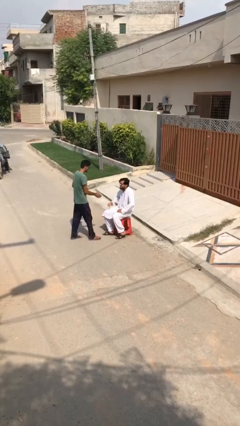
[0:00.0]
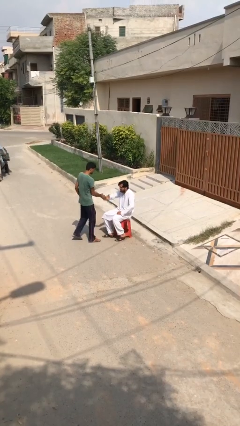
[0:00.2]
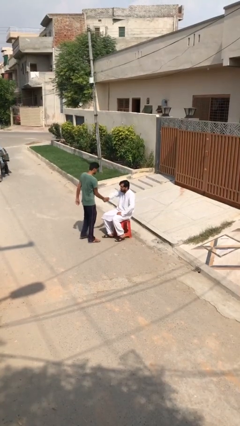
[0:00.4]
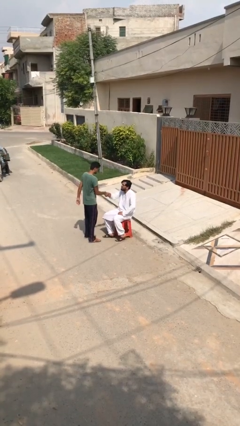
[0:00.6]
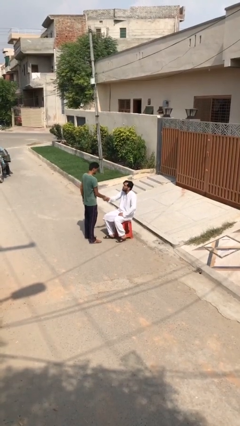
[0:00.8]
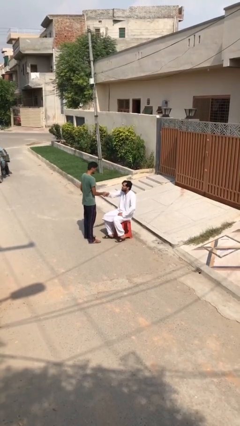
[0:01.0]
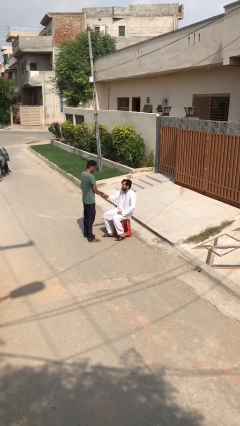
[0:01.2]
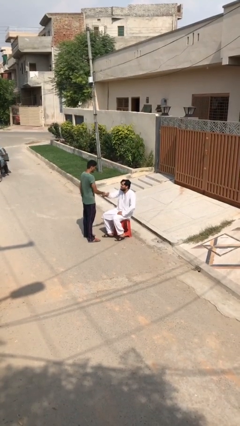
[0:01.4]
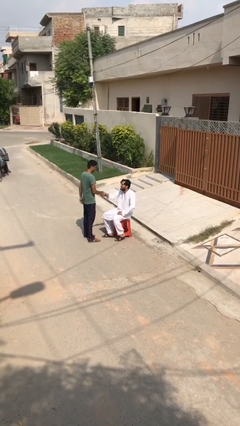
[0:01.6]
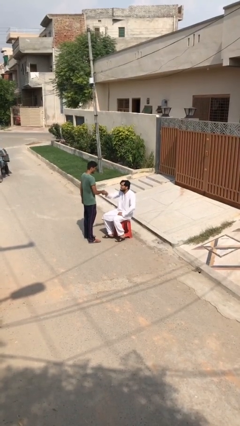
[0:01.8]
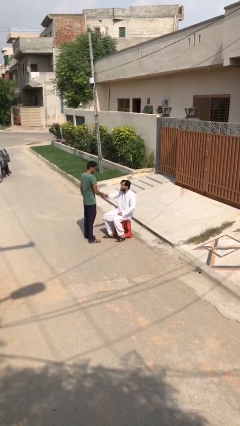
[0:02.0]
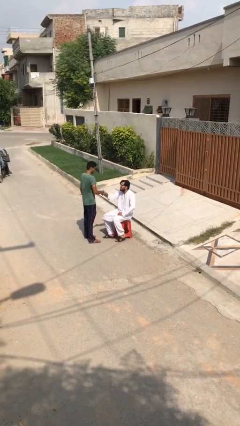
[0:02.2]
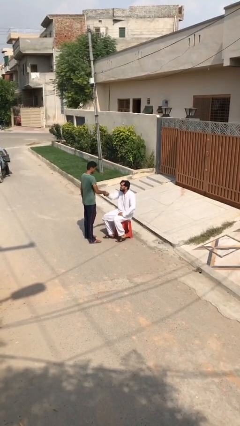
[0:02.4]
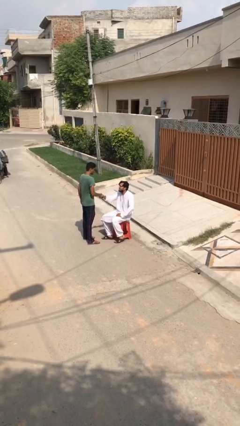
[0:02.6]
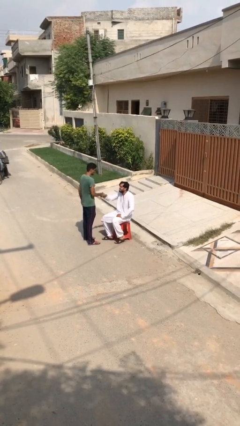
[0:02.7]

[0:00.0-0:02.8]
person shakes hand

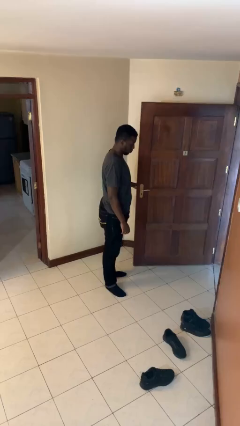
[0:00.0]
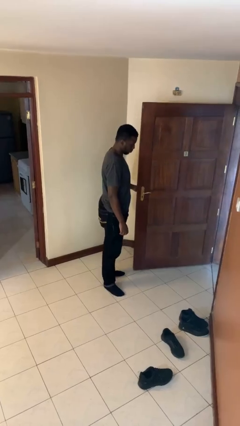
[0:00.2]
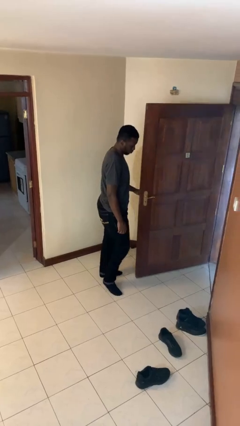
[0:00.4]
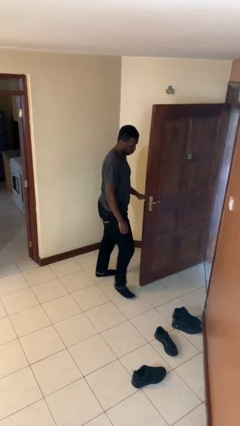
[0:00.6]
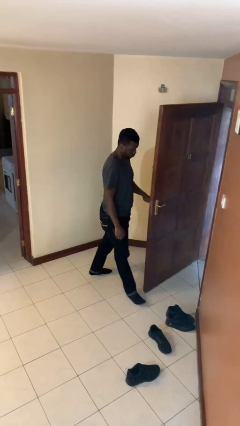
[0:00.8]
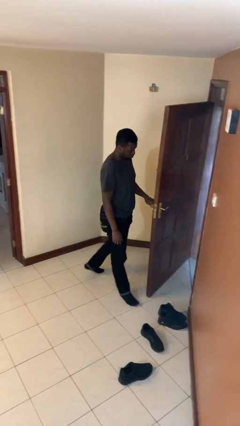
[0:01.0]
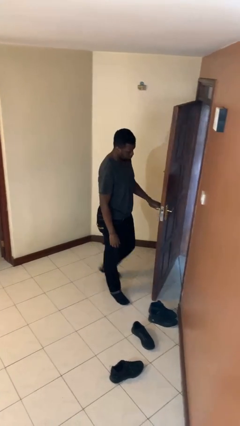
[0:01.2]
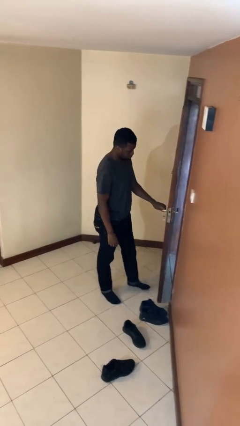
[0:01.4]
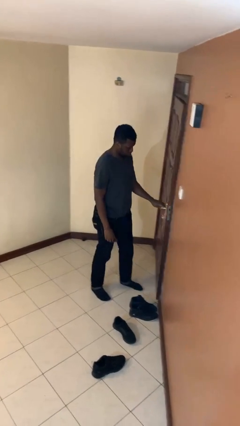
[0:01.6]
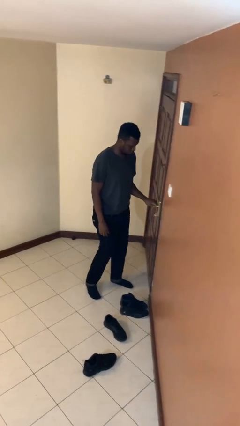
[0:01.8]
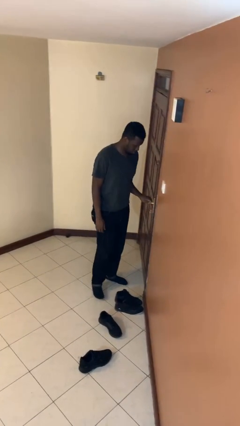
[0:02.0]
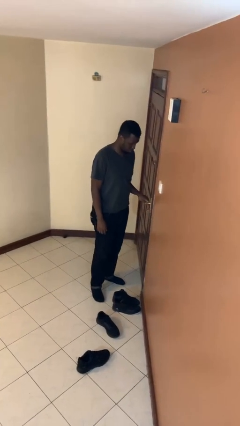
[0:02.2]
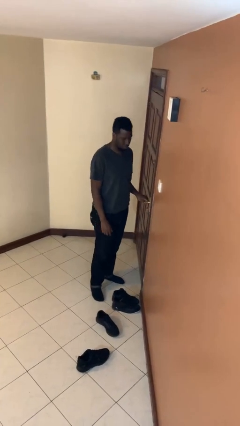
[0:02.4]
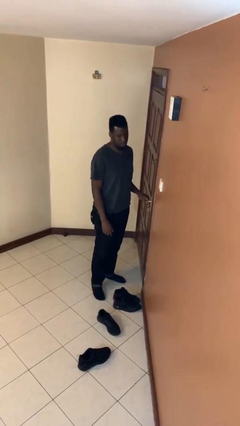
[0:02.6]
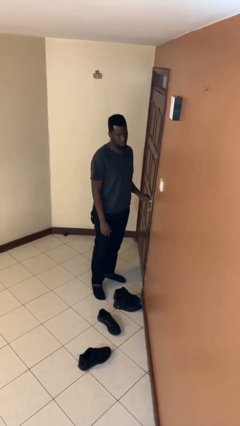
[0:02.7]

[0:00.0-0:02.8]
person closes facility door

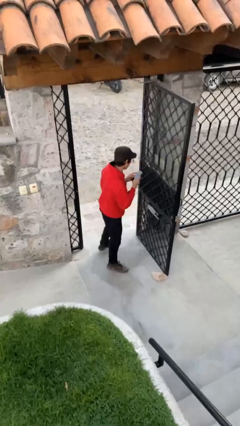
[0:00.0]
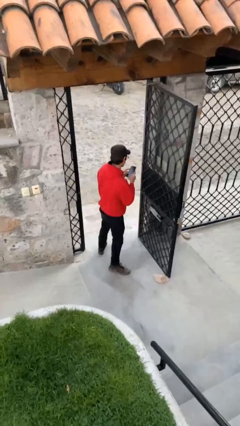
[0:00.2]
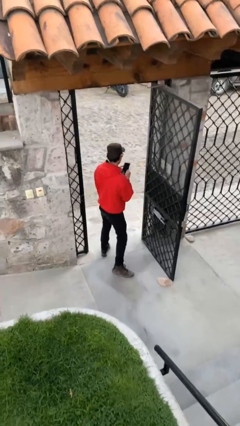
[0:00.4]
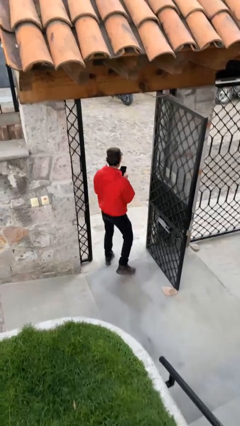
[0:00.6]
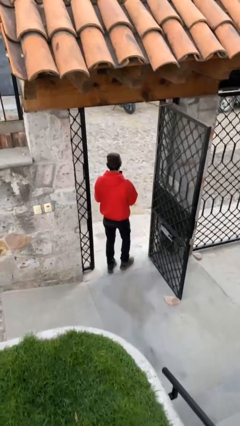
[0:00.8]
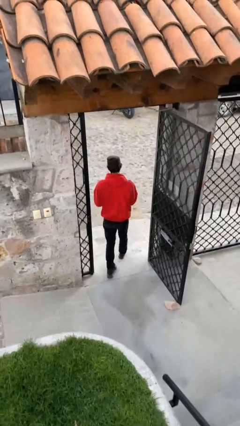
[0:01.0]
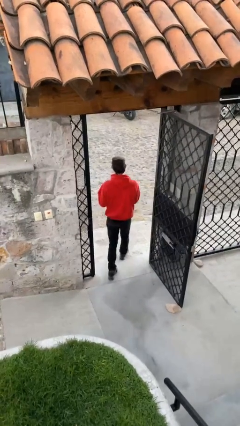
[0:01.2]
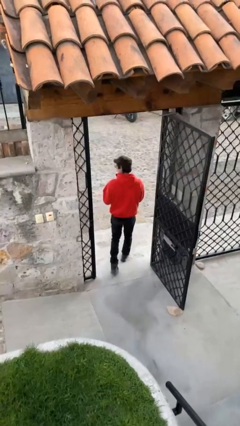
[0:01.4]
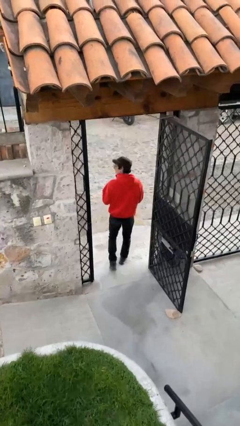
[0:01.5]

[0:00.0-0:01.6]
person exits scene through structure

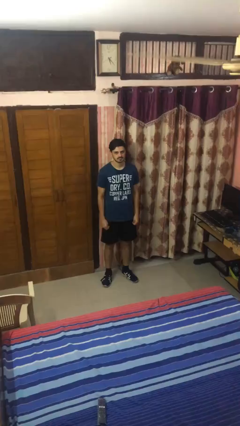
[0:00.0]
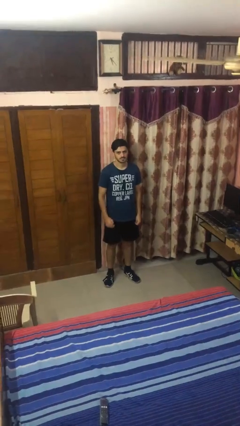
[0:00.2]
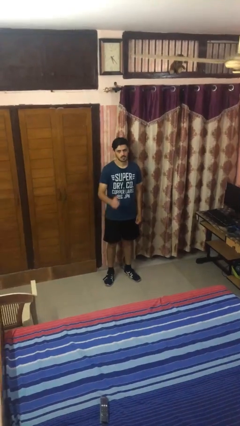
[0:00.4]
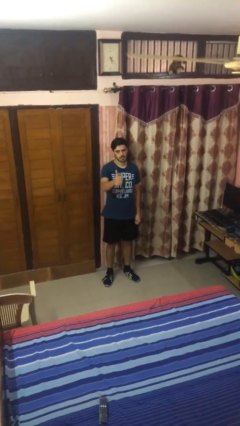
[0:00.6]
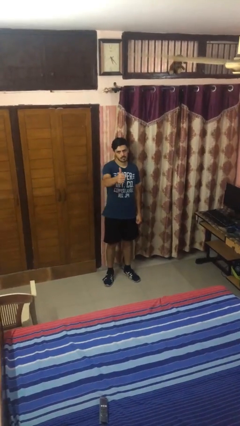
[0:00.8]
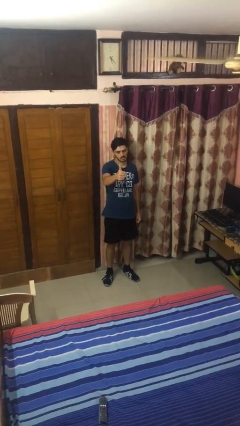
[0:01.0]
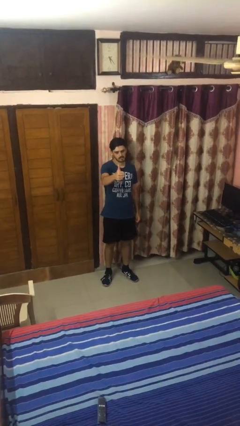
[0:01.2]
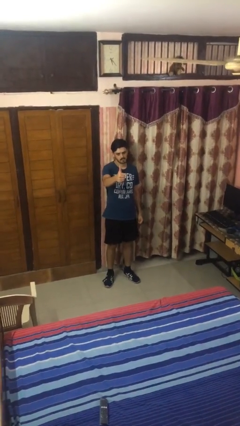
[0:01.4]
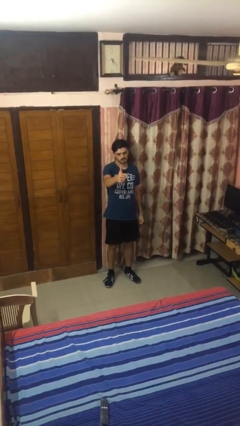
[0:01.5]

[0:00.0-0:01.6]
person gestures thumbs up

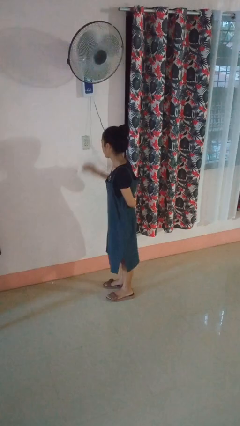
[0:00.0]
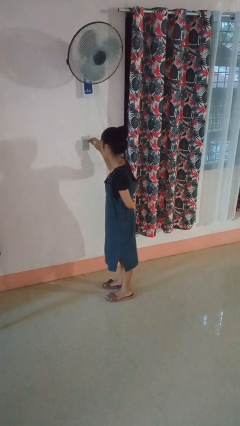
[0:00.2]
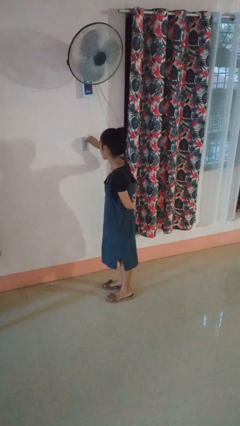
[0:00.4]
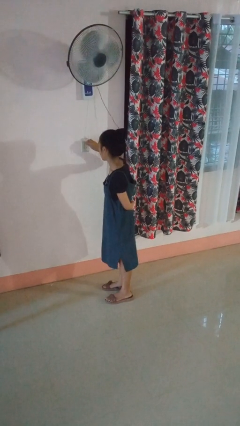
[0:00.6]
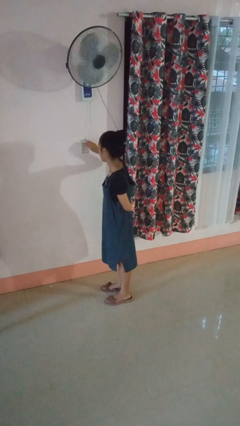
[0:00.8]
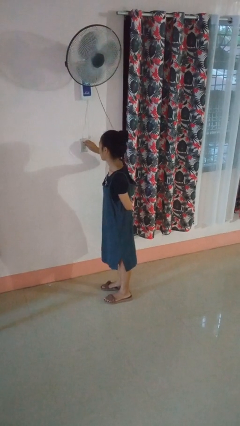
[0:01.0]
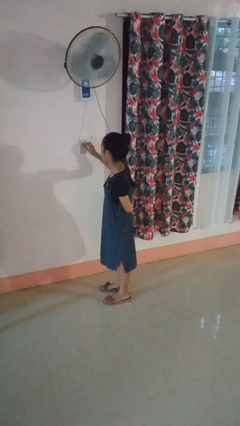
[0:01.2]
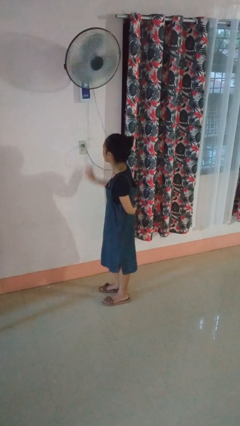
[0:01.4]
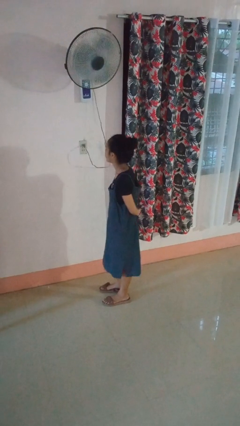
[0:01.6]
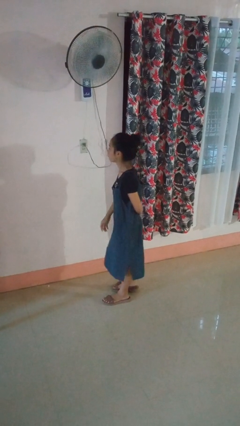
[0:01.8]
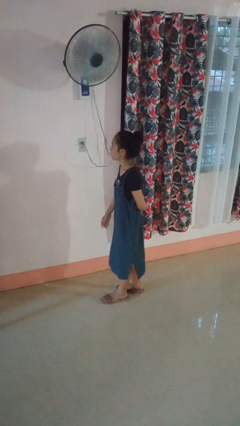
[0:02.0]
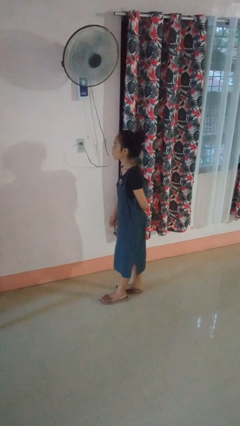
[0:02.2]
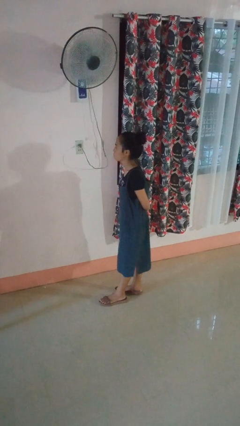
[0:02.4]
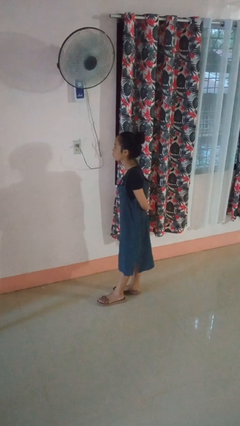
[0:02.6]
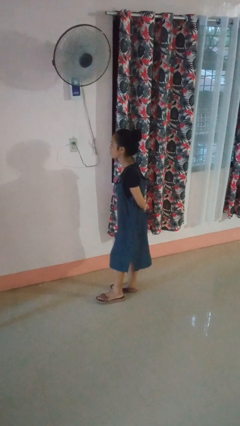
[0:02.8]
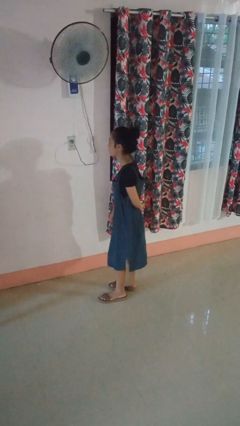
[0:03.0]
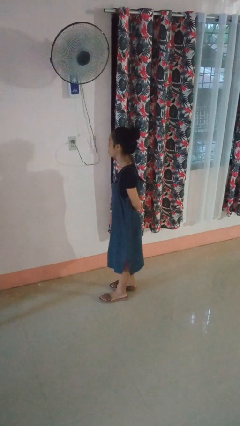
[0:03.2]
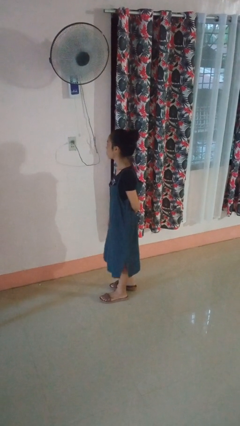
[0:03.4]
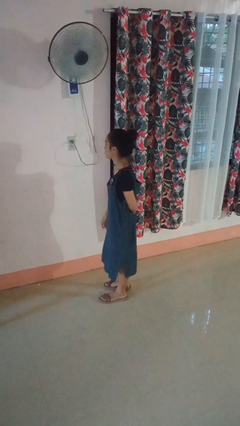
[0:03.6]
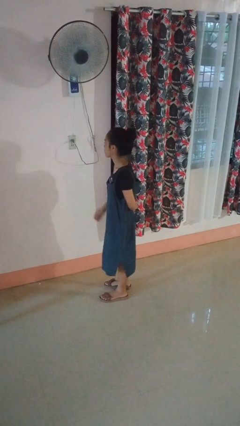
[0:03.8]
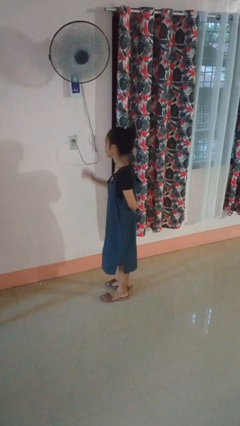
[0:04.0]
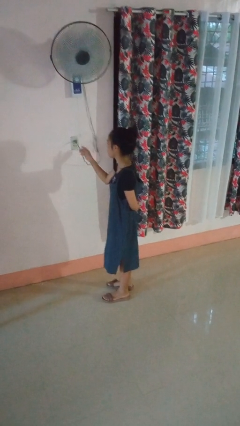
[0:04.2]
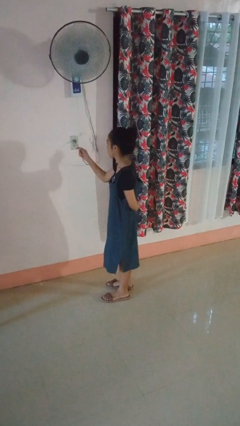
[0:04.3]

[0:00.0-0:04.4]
person plugs into electrical socket

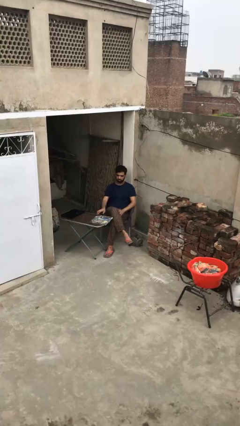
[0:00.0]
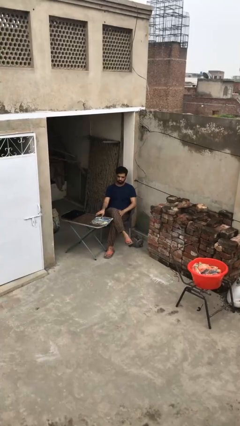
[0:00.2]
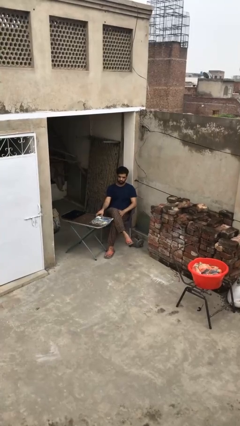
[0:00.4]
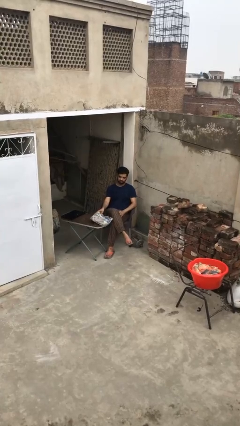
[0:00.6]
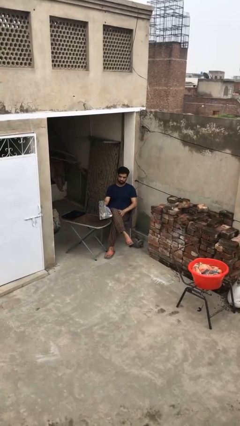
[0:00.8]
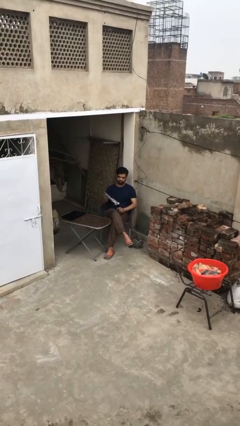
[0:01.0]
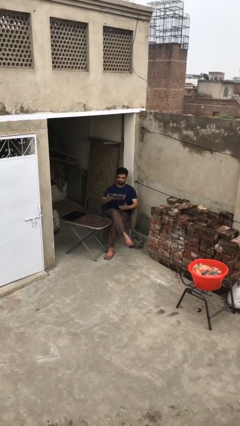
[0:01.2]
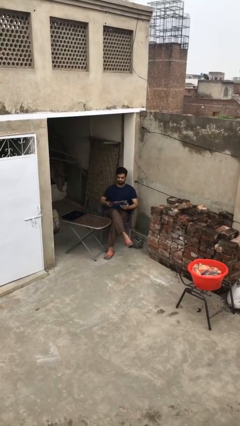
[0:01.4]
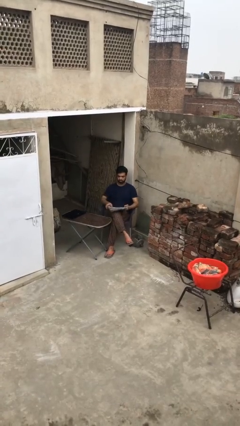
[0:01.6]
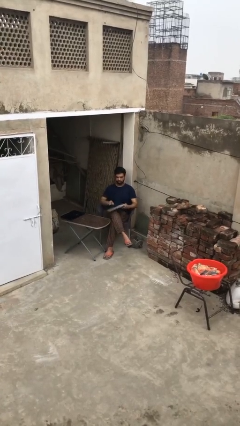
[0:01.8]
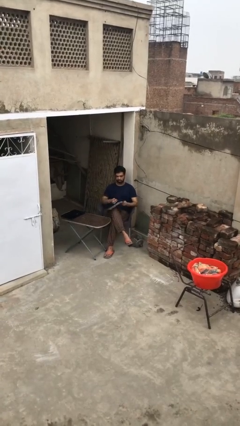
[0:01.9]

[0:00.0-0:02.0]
person picks up object from table

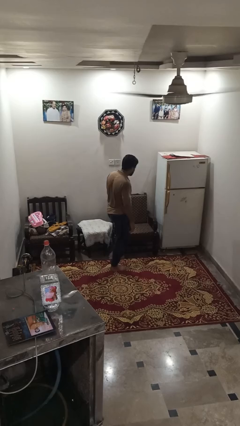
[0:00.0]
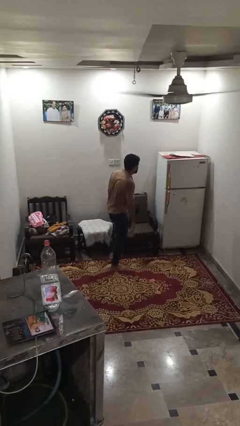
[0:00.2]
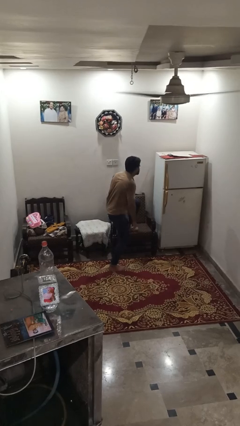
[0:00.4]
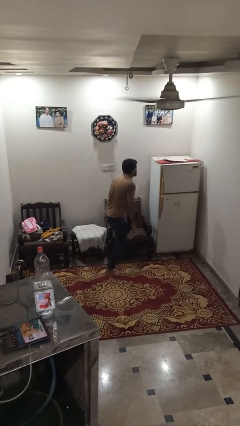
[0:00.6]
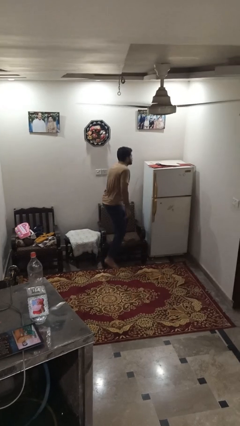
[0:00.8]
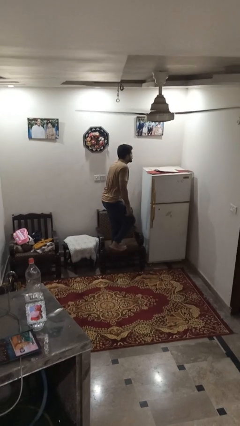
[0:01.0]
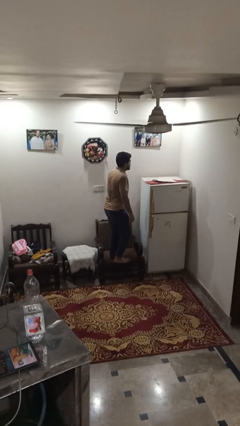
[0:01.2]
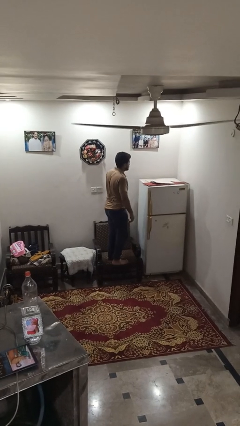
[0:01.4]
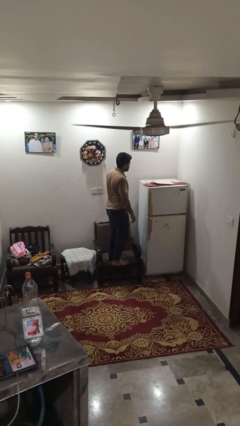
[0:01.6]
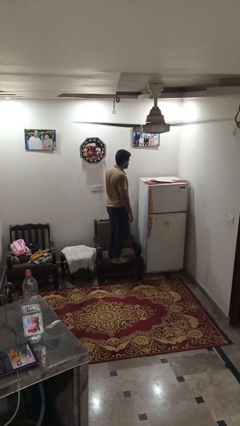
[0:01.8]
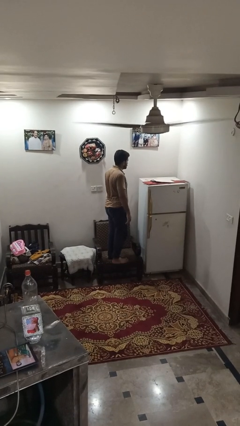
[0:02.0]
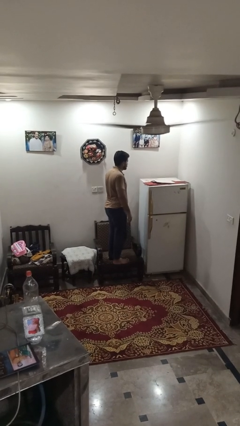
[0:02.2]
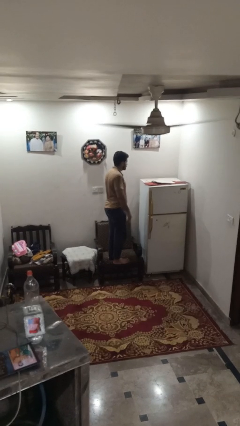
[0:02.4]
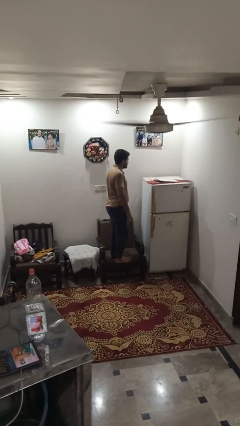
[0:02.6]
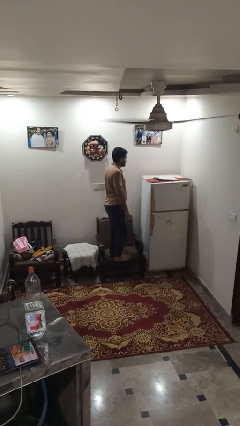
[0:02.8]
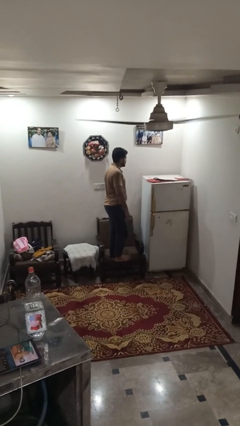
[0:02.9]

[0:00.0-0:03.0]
person climbs on couch
